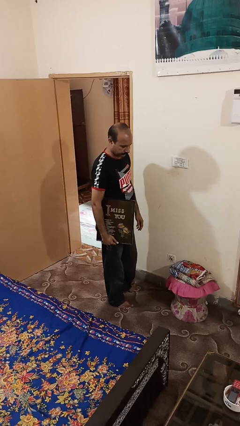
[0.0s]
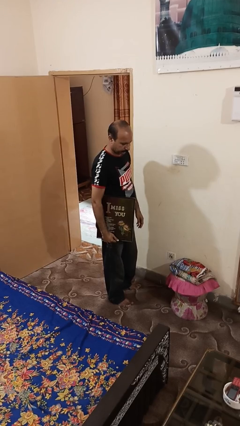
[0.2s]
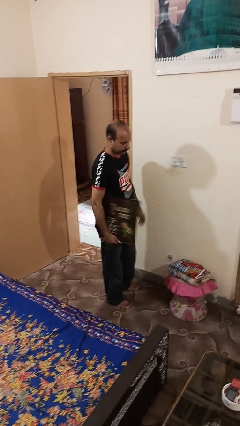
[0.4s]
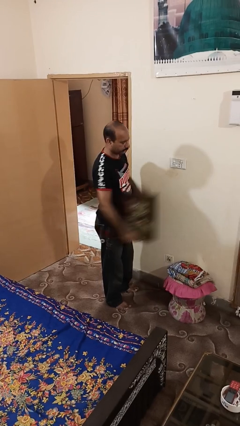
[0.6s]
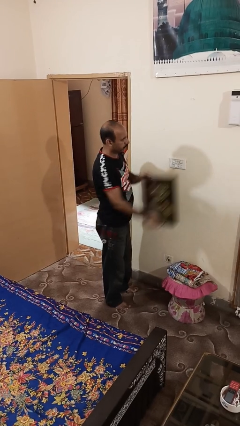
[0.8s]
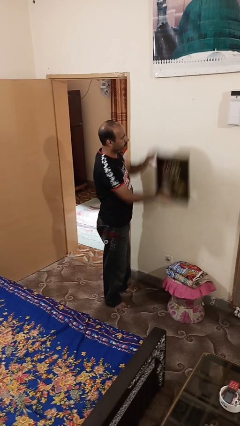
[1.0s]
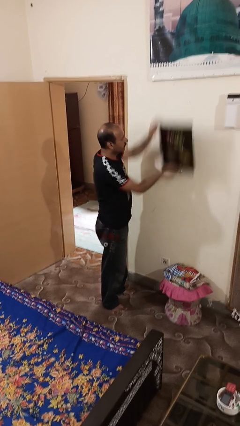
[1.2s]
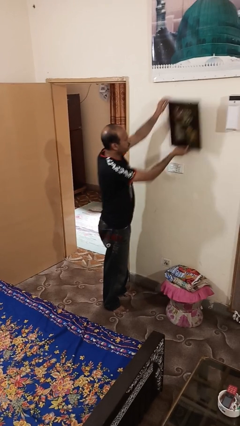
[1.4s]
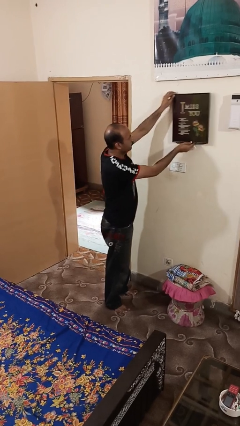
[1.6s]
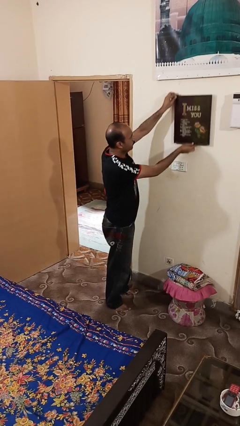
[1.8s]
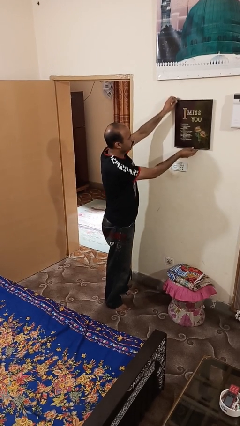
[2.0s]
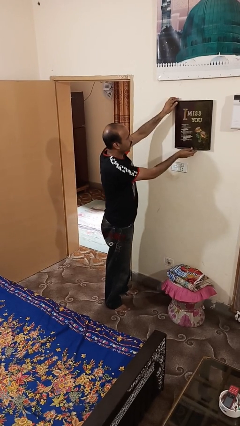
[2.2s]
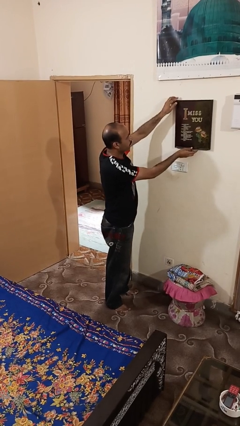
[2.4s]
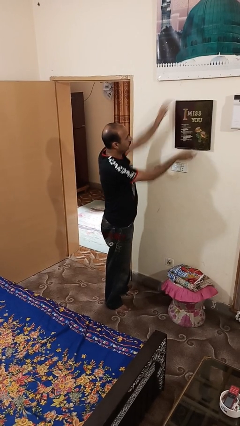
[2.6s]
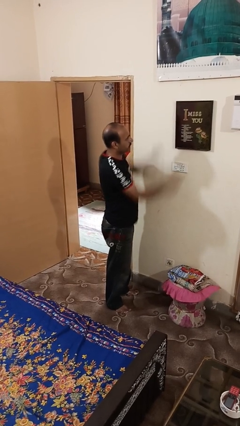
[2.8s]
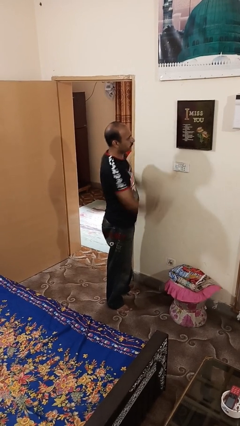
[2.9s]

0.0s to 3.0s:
person puts up picture frame

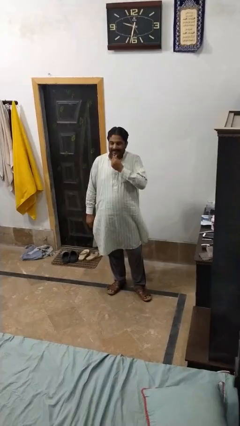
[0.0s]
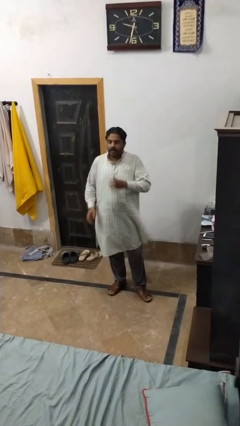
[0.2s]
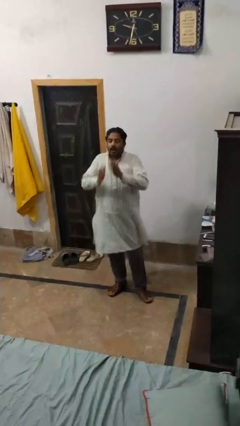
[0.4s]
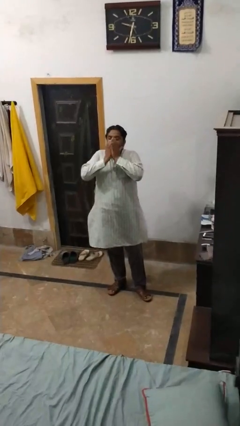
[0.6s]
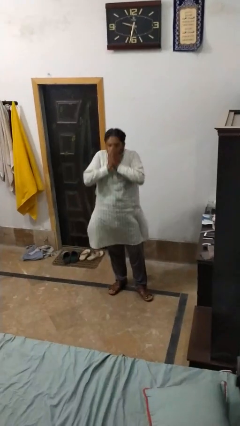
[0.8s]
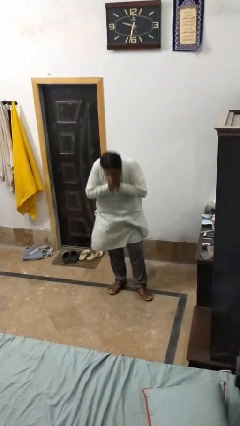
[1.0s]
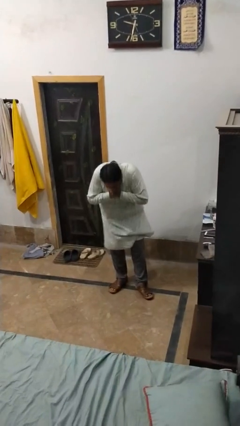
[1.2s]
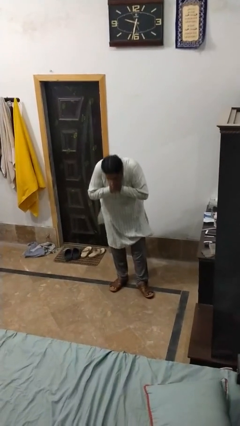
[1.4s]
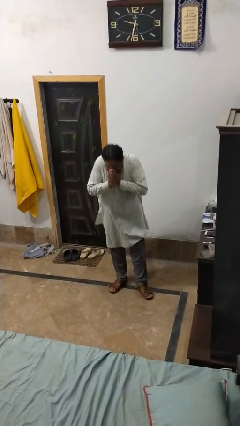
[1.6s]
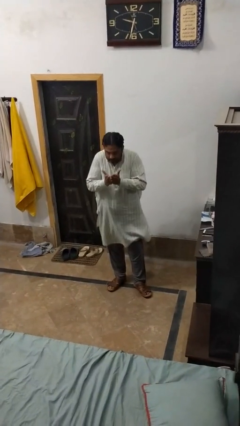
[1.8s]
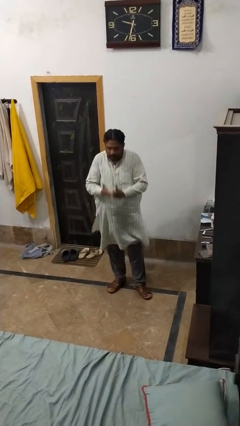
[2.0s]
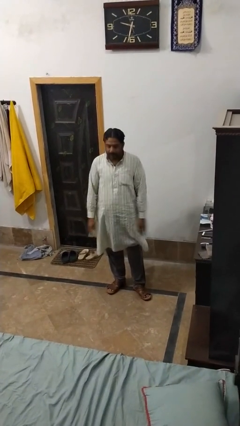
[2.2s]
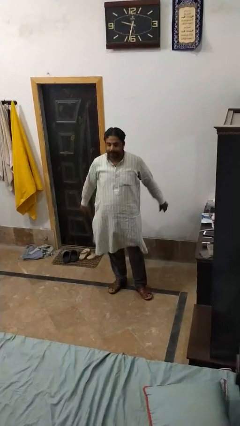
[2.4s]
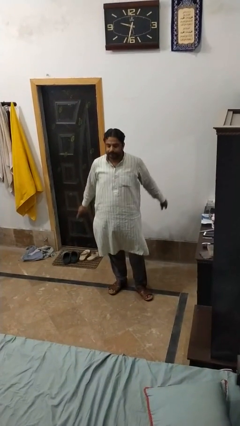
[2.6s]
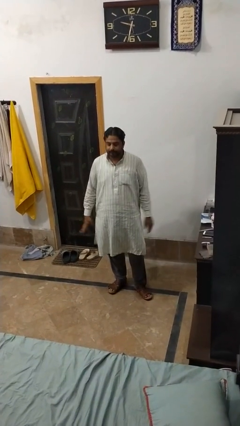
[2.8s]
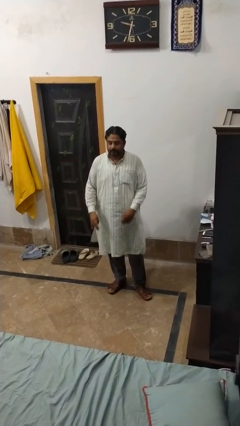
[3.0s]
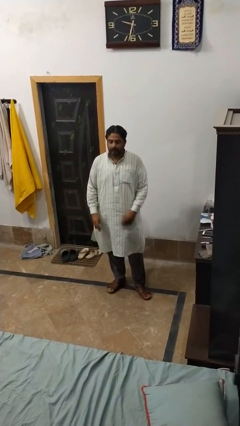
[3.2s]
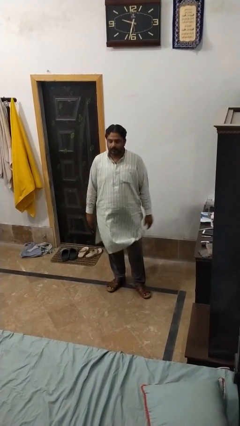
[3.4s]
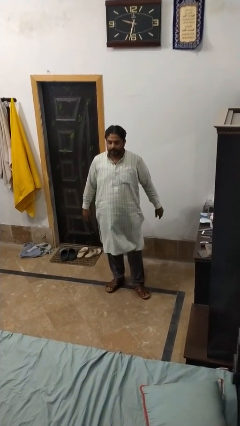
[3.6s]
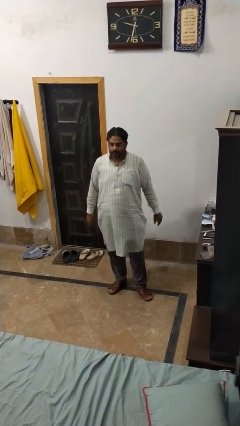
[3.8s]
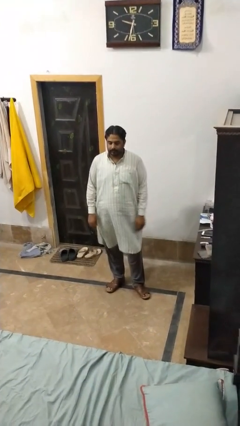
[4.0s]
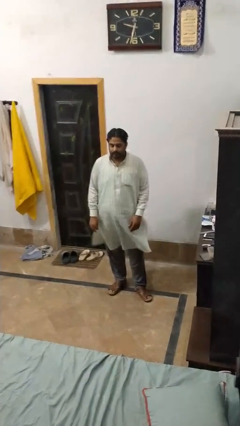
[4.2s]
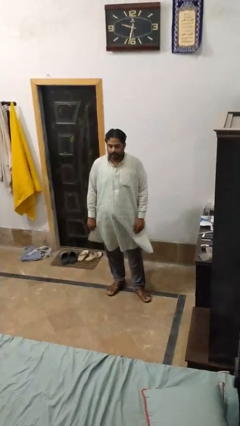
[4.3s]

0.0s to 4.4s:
person sneezes into hand

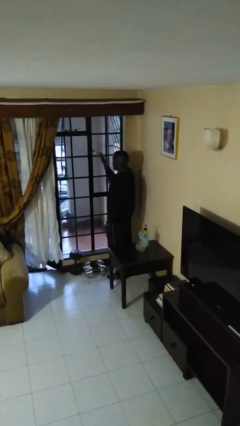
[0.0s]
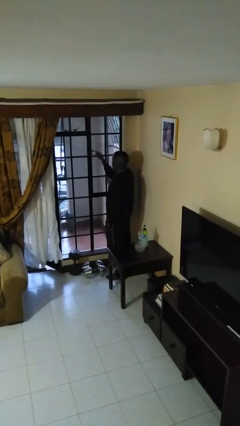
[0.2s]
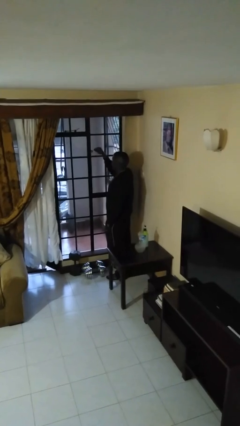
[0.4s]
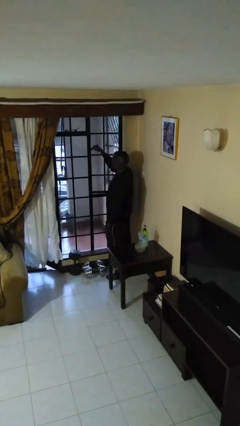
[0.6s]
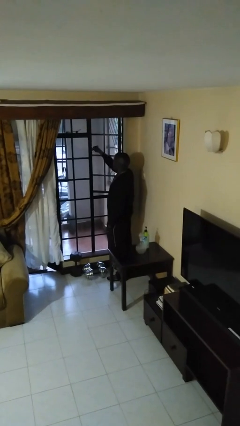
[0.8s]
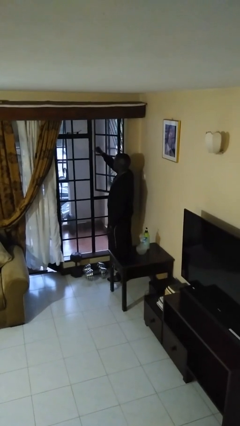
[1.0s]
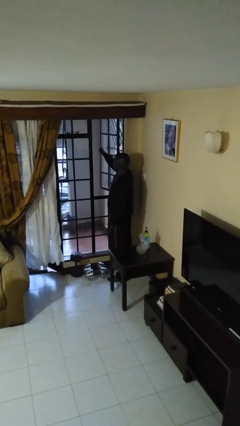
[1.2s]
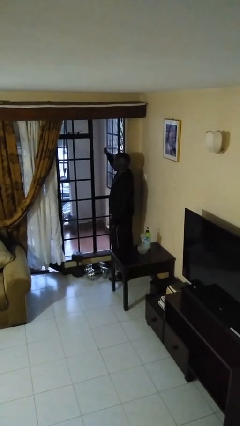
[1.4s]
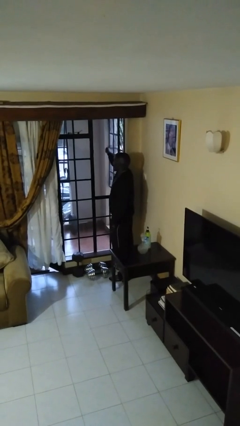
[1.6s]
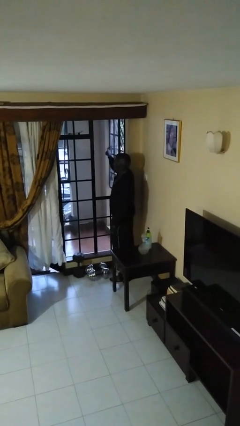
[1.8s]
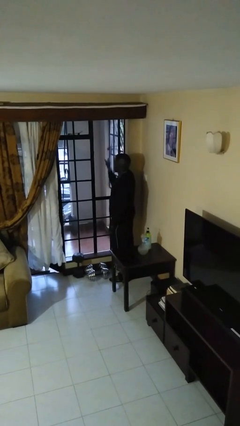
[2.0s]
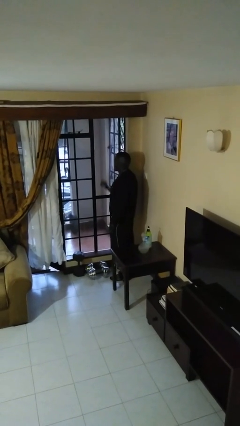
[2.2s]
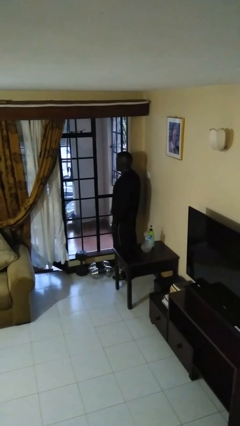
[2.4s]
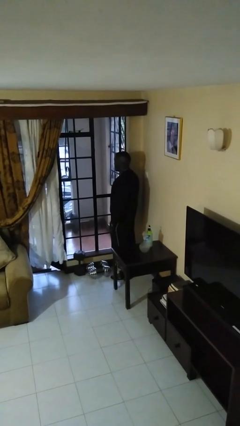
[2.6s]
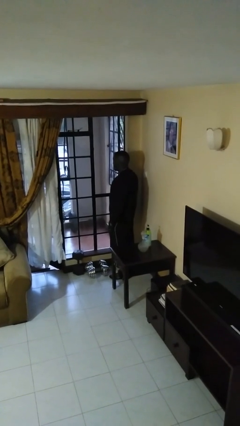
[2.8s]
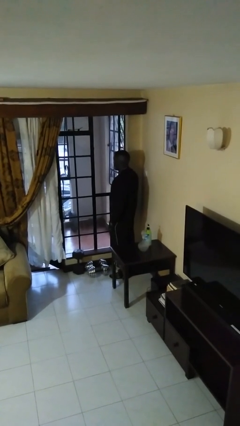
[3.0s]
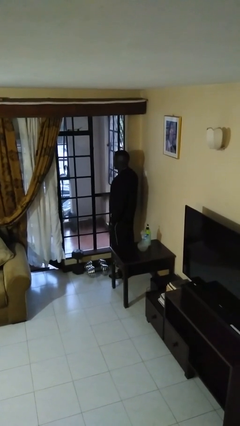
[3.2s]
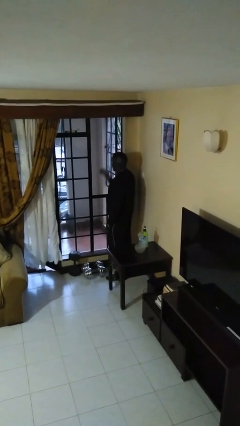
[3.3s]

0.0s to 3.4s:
person opens home window

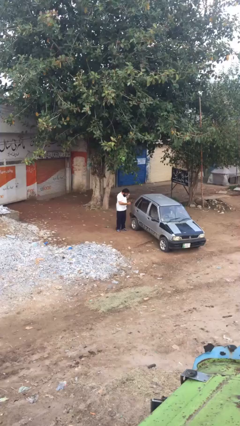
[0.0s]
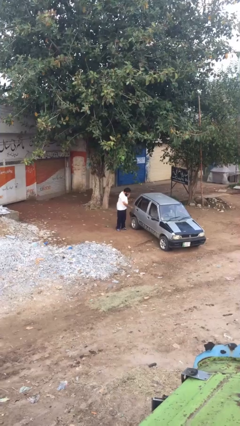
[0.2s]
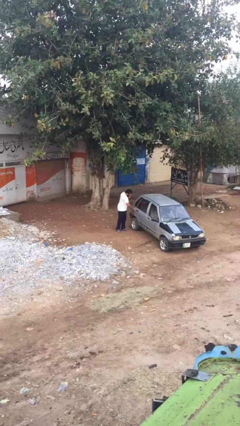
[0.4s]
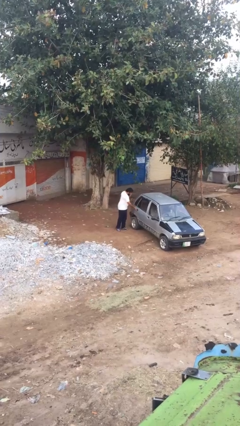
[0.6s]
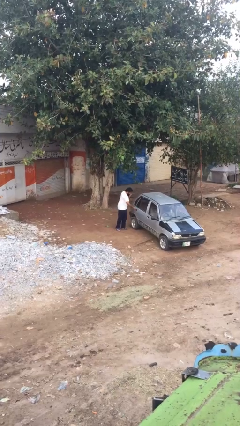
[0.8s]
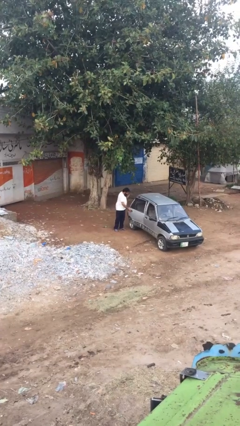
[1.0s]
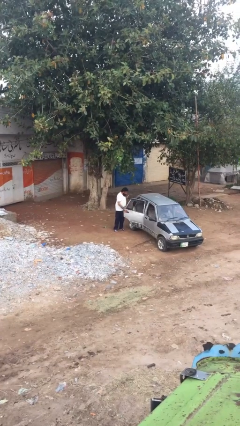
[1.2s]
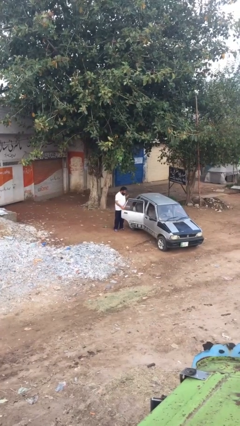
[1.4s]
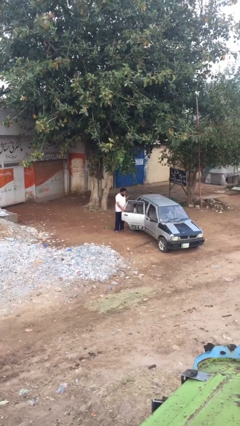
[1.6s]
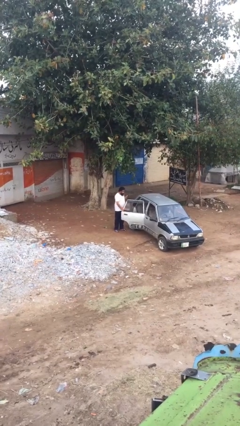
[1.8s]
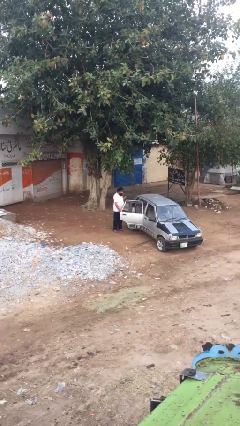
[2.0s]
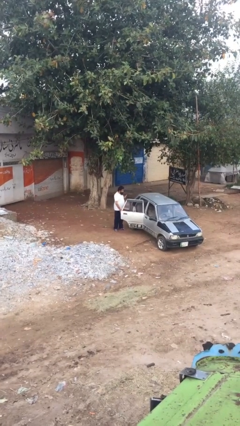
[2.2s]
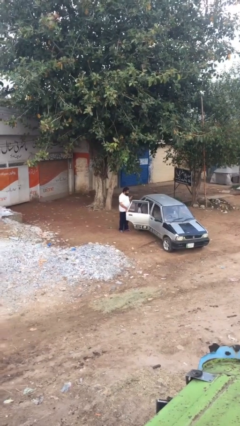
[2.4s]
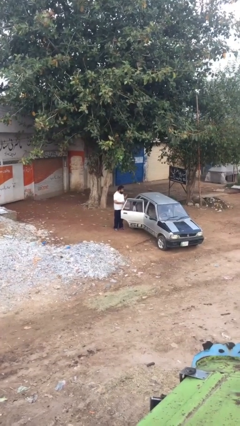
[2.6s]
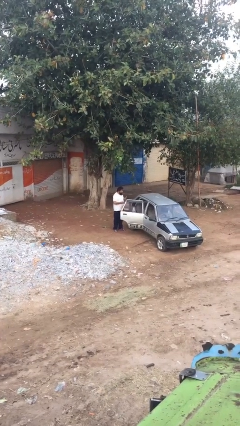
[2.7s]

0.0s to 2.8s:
person opens car door

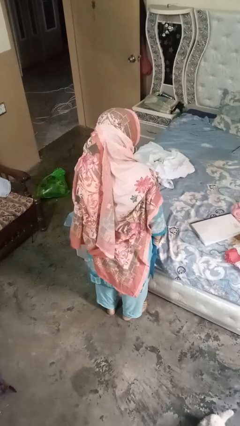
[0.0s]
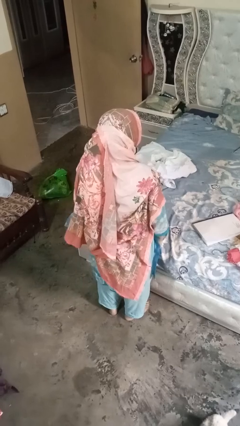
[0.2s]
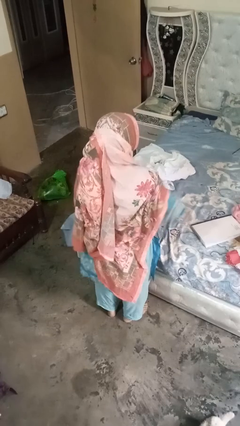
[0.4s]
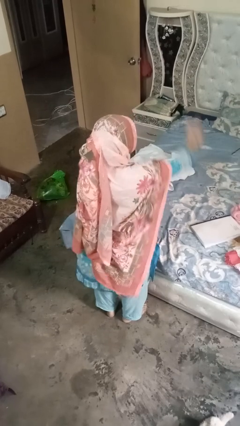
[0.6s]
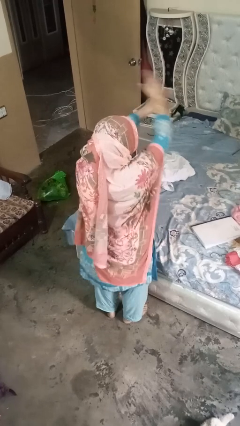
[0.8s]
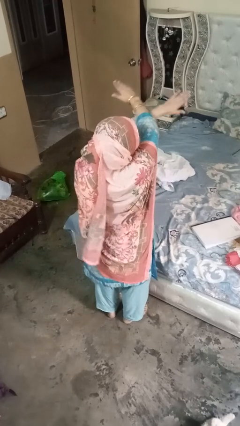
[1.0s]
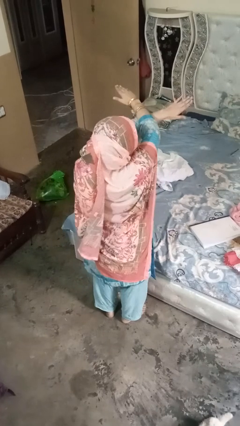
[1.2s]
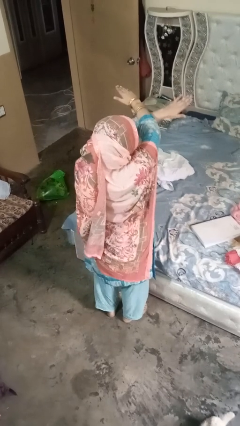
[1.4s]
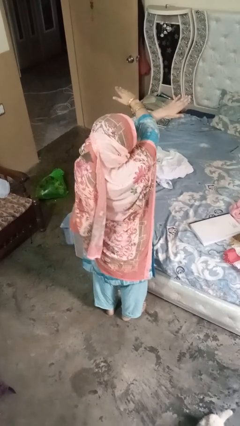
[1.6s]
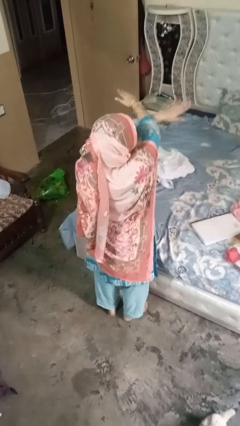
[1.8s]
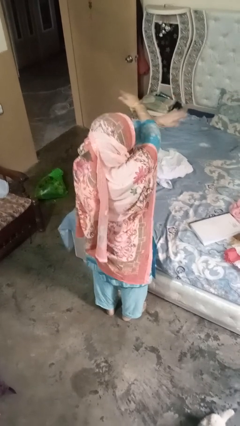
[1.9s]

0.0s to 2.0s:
person gestures arms x

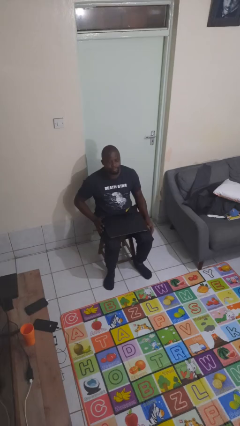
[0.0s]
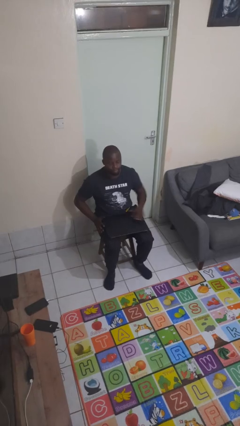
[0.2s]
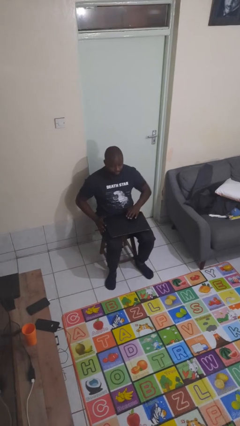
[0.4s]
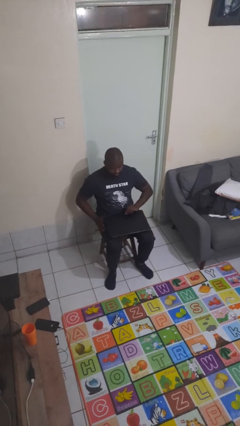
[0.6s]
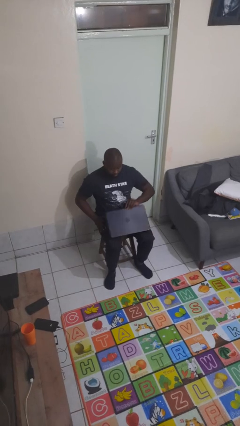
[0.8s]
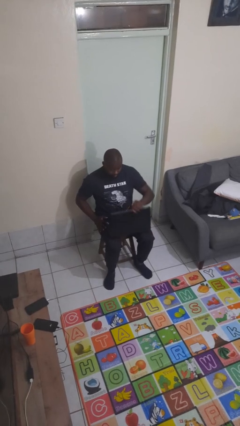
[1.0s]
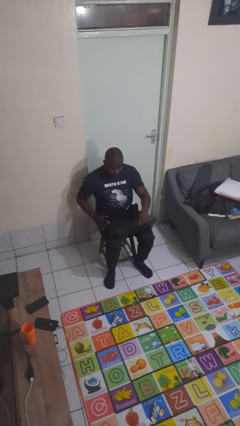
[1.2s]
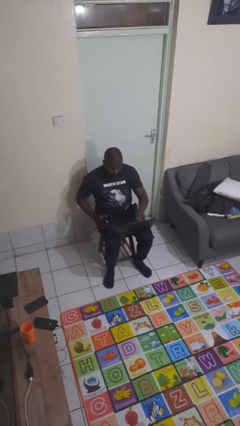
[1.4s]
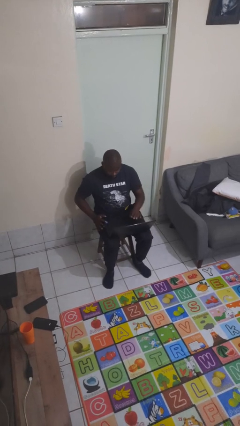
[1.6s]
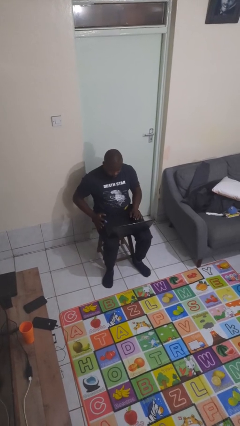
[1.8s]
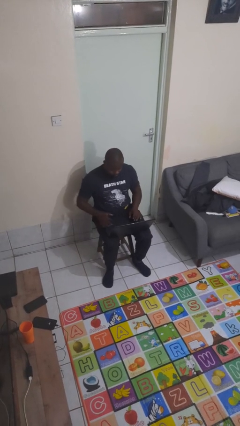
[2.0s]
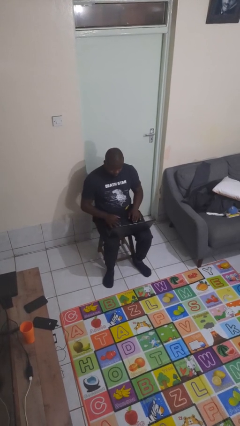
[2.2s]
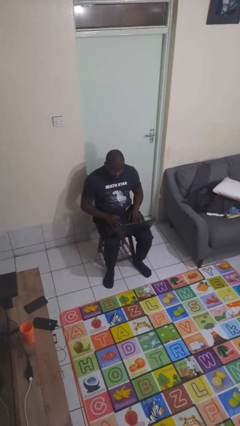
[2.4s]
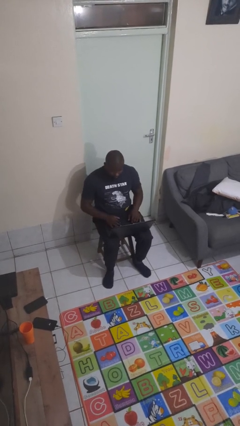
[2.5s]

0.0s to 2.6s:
person opens laptop
